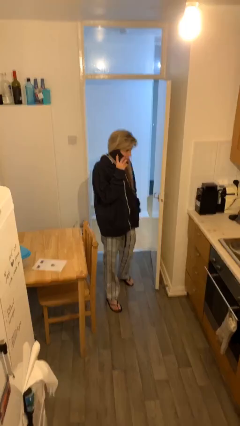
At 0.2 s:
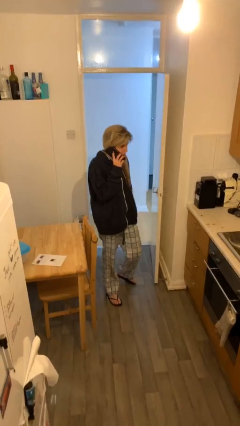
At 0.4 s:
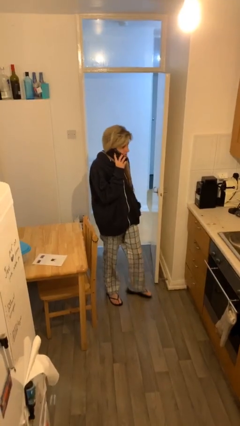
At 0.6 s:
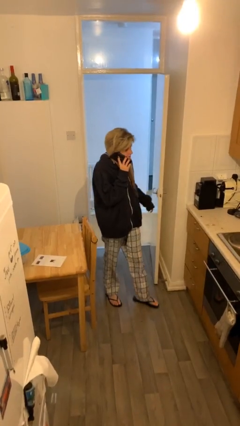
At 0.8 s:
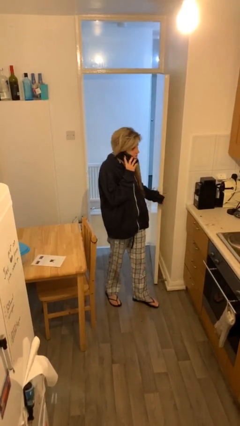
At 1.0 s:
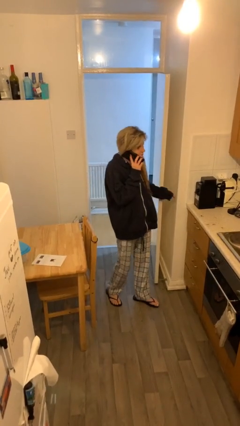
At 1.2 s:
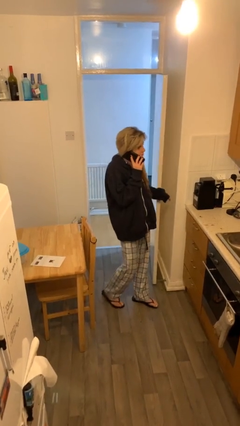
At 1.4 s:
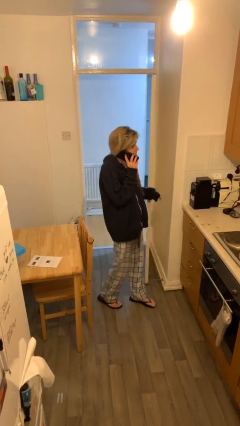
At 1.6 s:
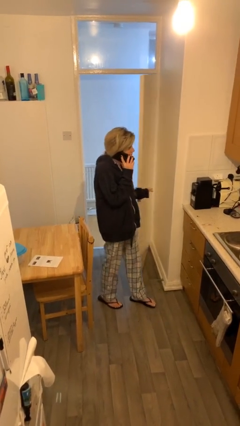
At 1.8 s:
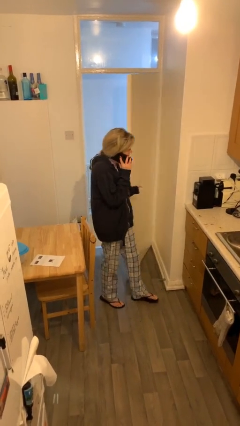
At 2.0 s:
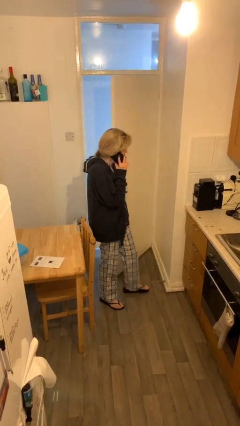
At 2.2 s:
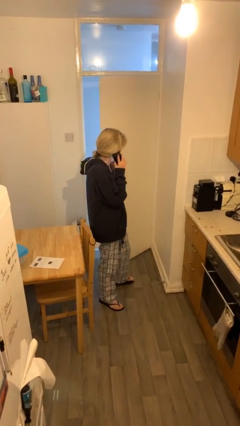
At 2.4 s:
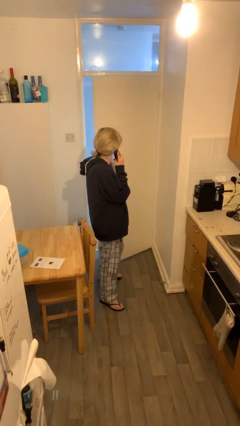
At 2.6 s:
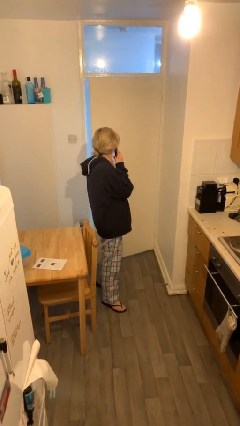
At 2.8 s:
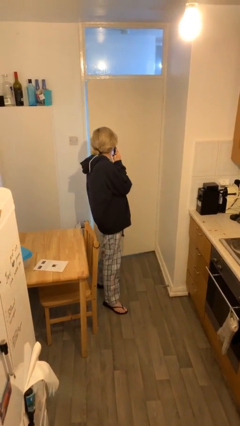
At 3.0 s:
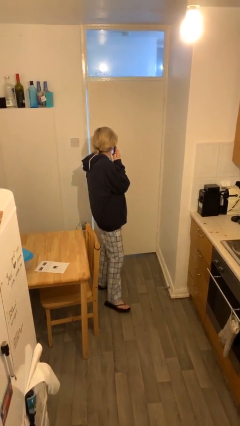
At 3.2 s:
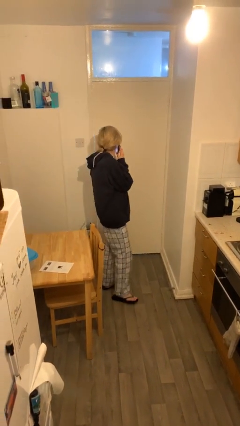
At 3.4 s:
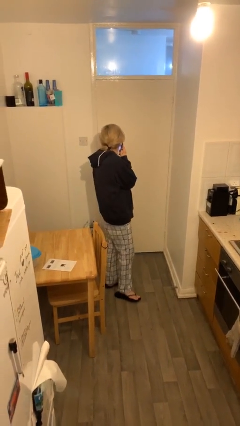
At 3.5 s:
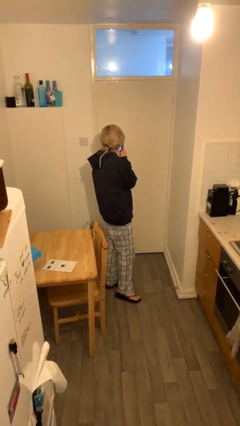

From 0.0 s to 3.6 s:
person closes facility door

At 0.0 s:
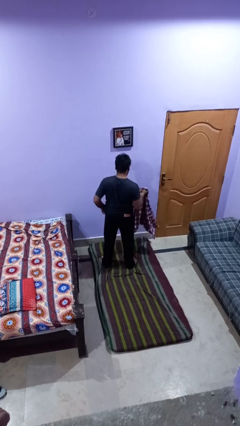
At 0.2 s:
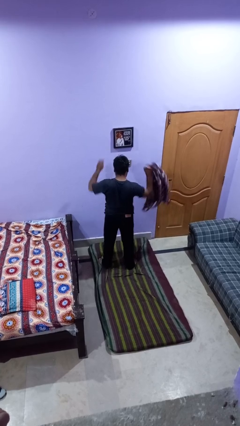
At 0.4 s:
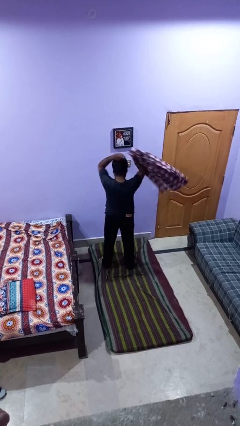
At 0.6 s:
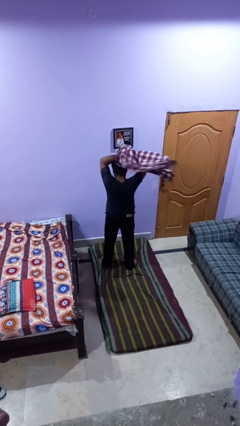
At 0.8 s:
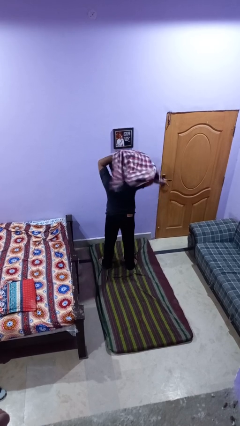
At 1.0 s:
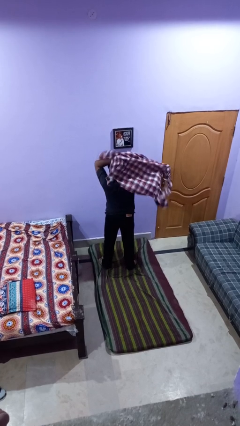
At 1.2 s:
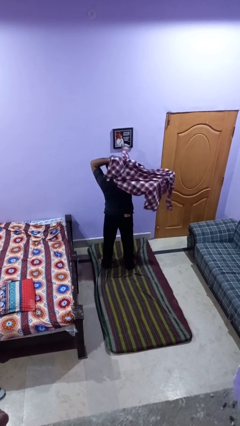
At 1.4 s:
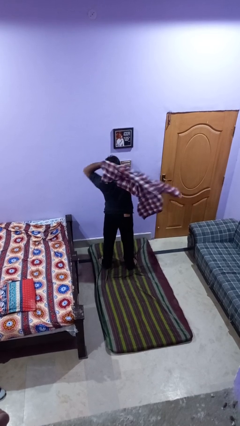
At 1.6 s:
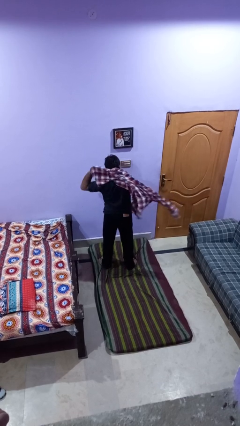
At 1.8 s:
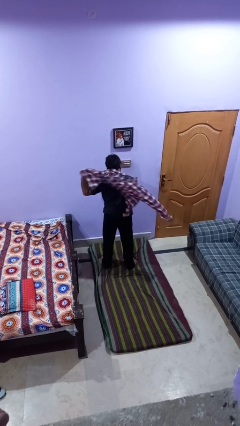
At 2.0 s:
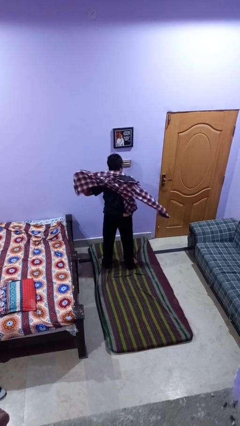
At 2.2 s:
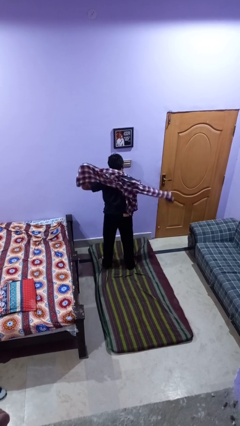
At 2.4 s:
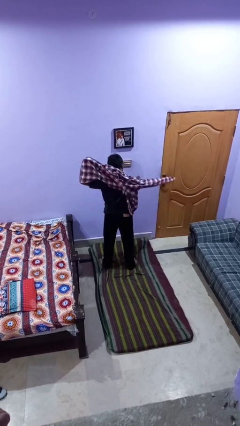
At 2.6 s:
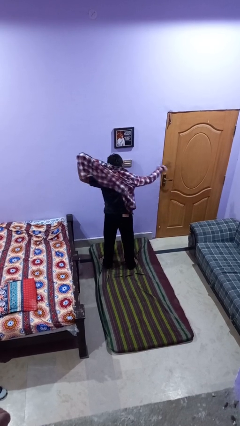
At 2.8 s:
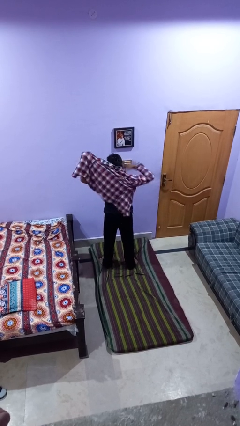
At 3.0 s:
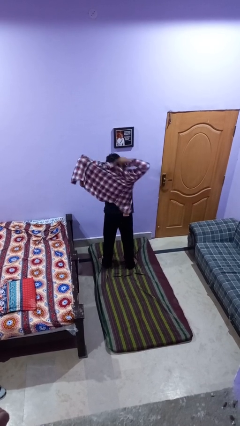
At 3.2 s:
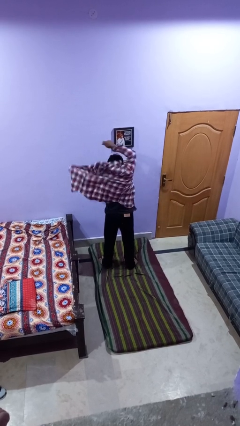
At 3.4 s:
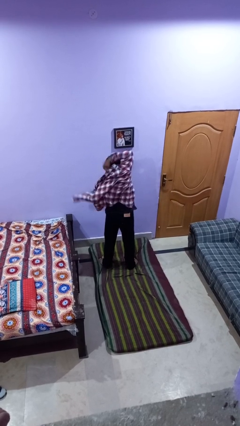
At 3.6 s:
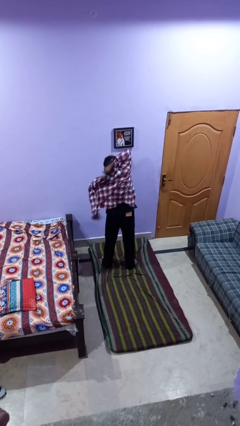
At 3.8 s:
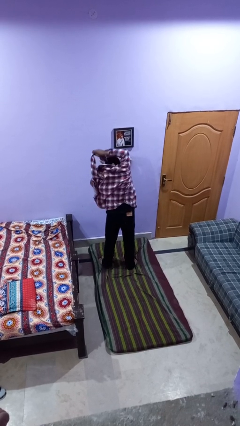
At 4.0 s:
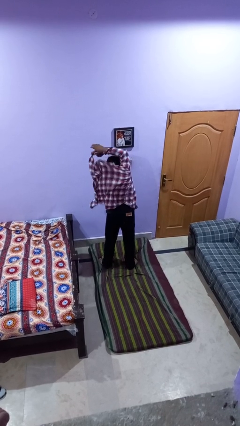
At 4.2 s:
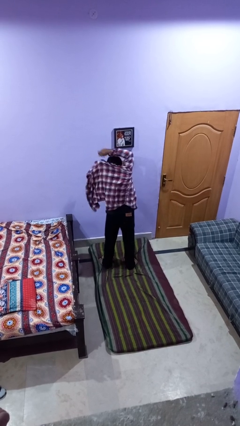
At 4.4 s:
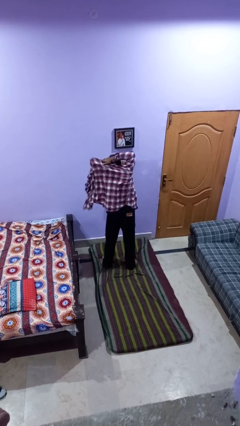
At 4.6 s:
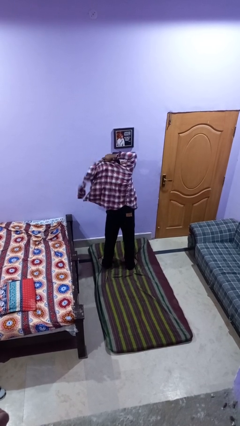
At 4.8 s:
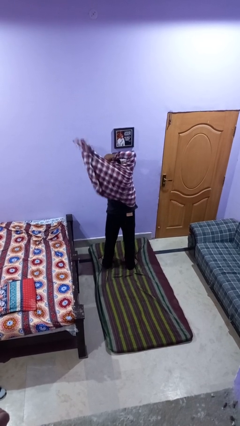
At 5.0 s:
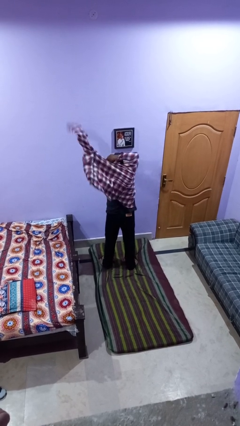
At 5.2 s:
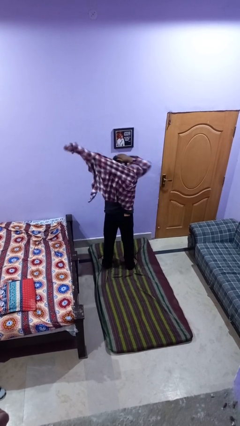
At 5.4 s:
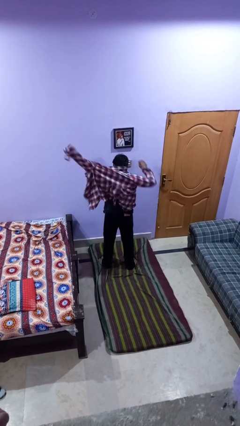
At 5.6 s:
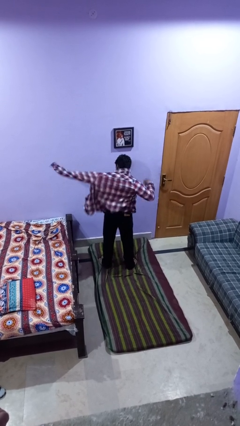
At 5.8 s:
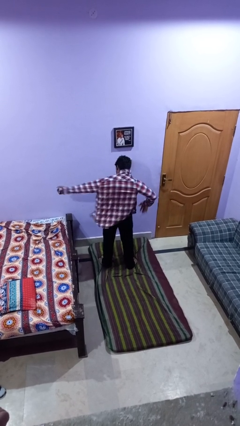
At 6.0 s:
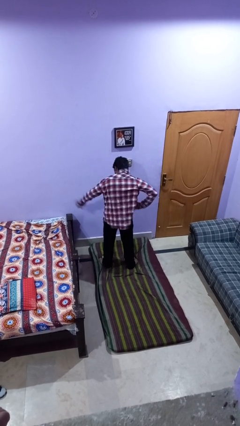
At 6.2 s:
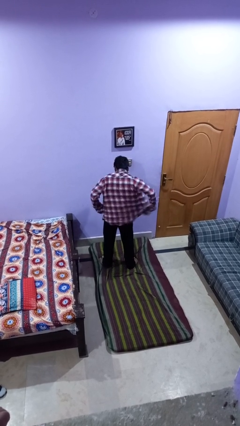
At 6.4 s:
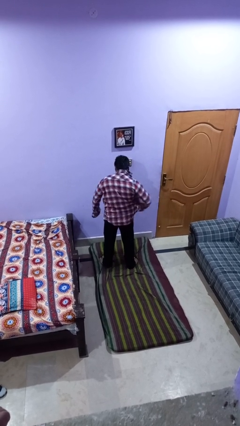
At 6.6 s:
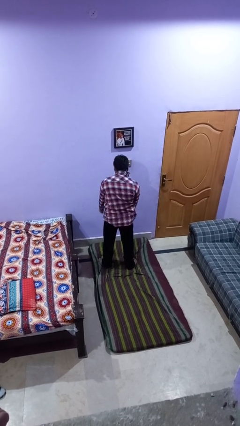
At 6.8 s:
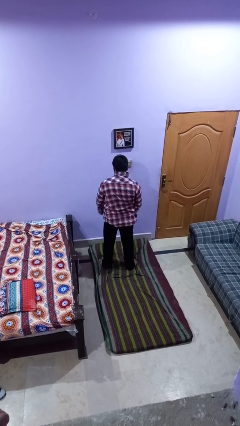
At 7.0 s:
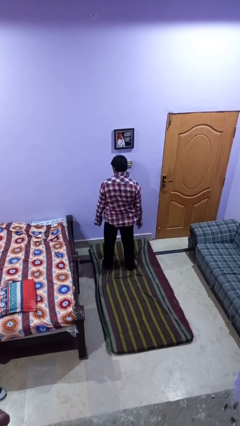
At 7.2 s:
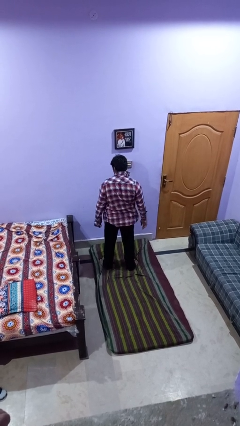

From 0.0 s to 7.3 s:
person puts on shirt

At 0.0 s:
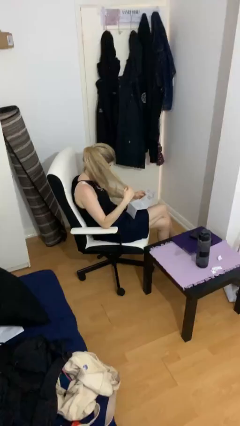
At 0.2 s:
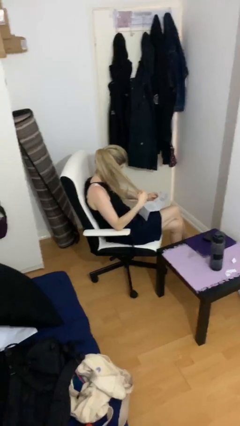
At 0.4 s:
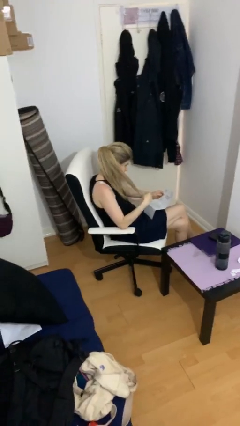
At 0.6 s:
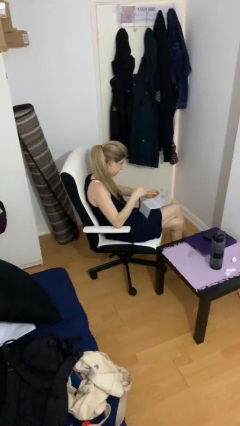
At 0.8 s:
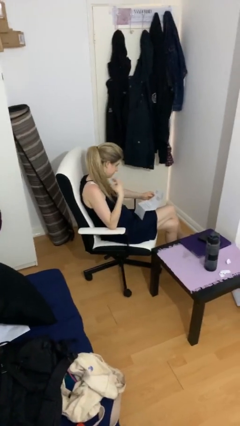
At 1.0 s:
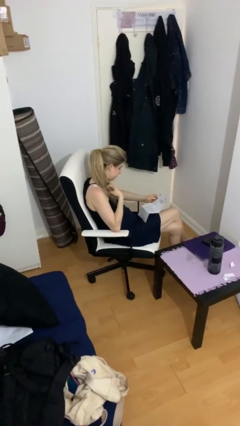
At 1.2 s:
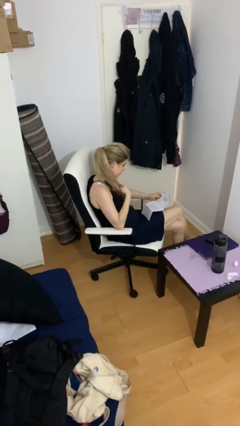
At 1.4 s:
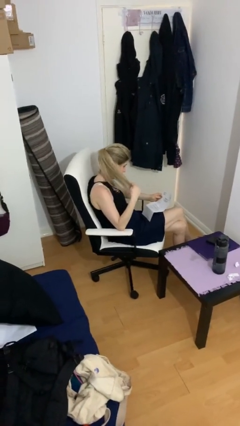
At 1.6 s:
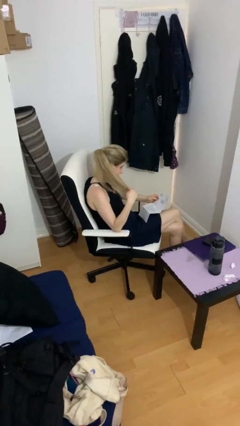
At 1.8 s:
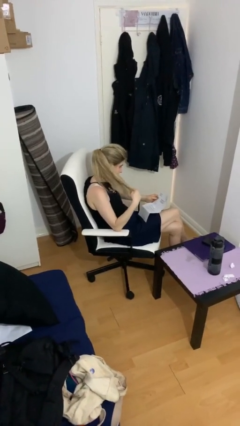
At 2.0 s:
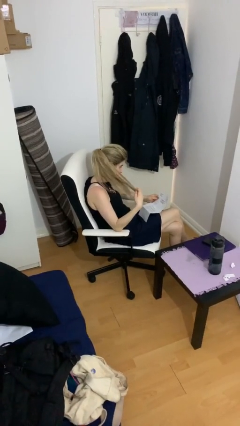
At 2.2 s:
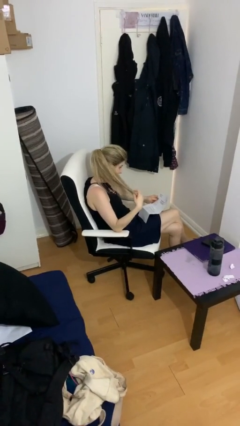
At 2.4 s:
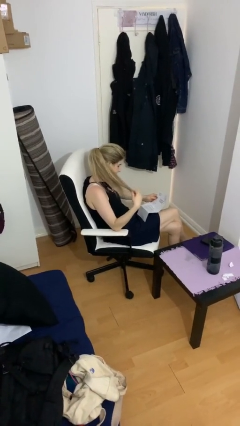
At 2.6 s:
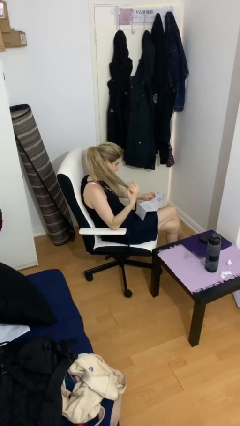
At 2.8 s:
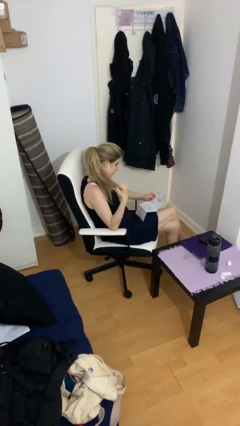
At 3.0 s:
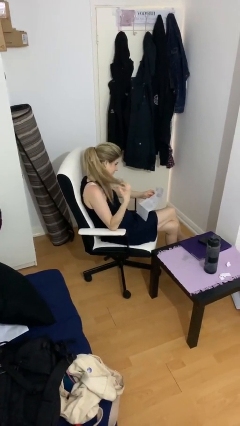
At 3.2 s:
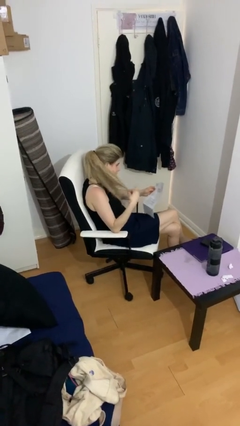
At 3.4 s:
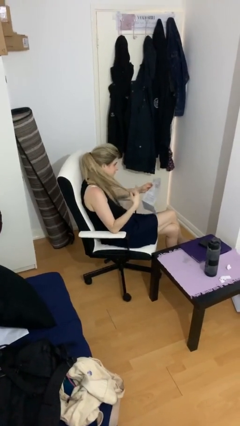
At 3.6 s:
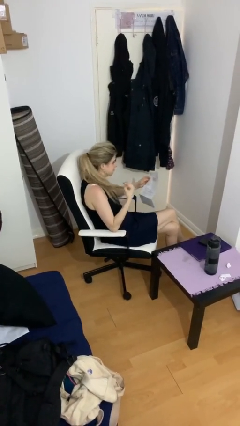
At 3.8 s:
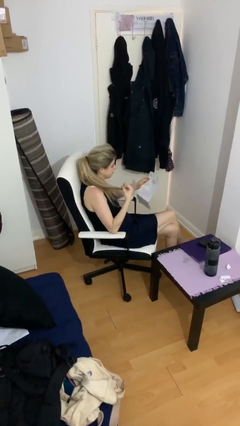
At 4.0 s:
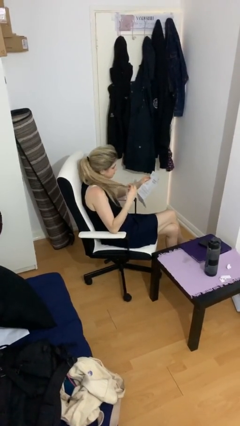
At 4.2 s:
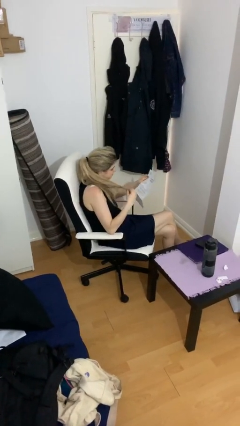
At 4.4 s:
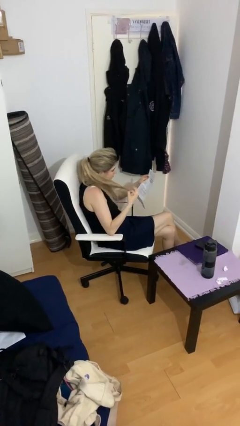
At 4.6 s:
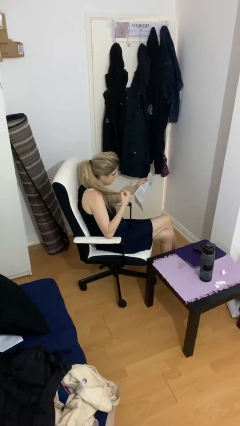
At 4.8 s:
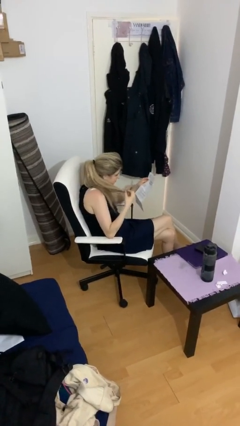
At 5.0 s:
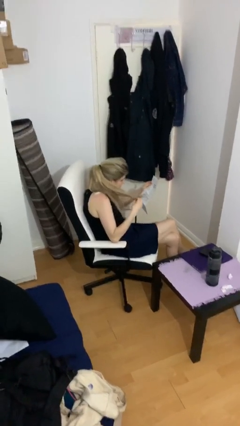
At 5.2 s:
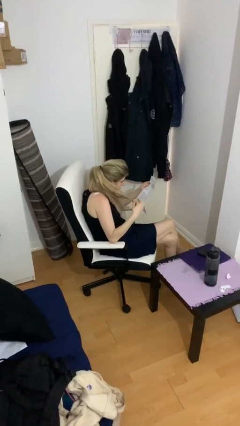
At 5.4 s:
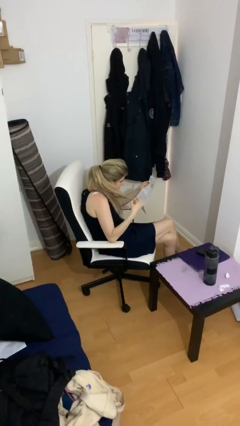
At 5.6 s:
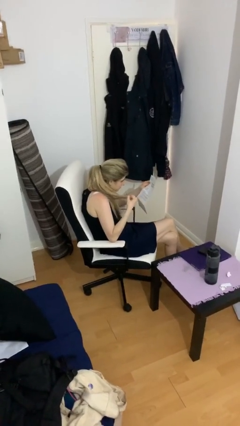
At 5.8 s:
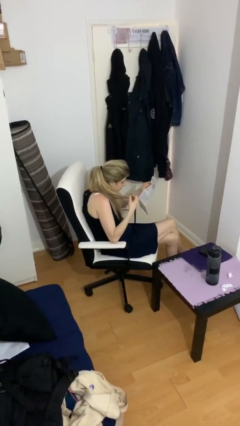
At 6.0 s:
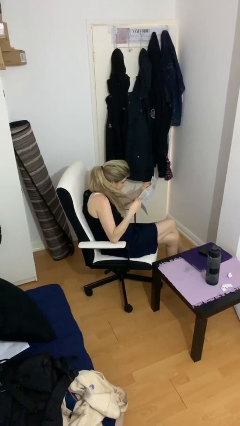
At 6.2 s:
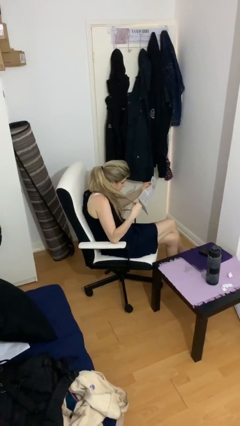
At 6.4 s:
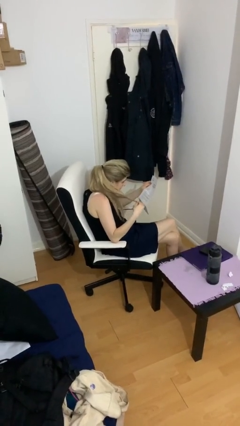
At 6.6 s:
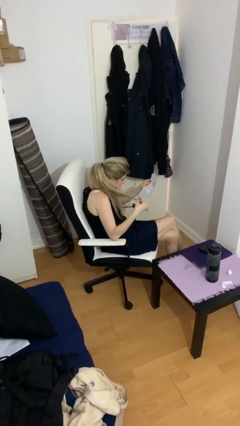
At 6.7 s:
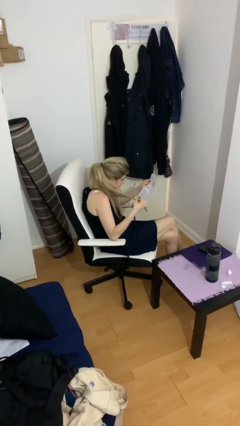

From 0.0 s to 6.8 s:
person reads document

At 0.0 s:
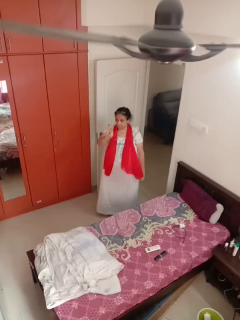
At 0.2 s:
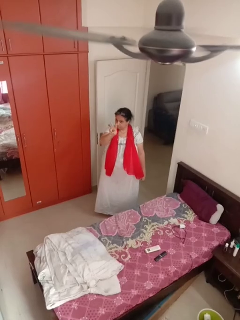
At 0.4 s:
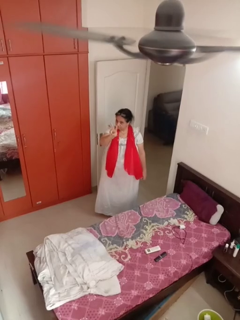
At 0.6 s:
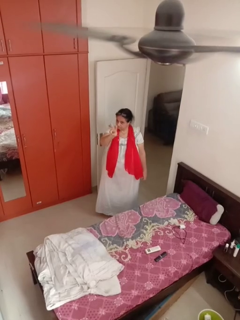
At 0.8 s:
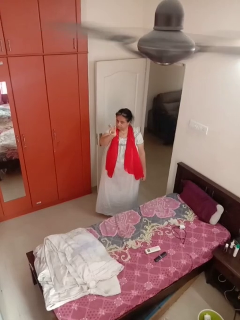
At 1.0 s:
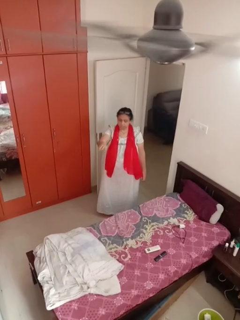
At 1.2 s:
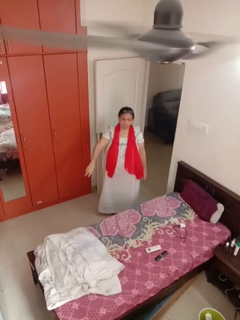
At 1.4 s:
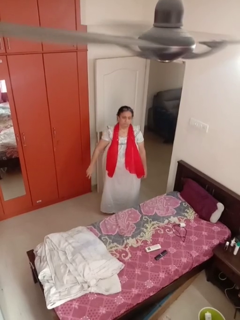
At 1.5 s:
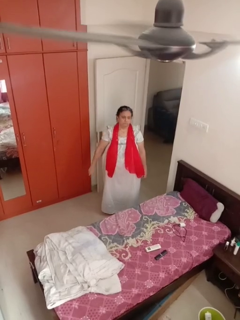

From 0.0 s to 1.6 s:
person gestures peace
